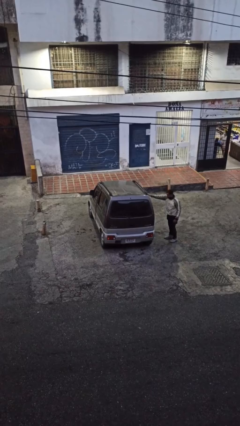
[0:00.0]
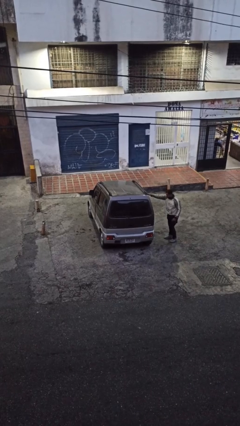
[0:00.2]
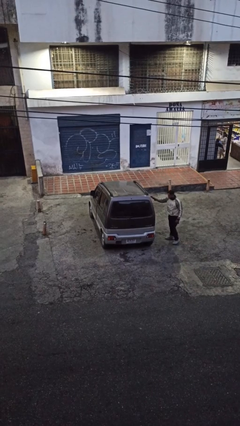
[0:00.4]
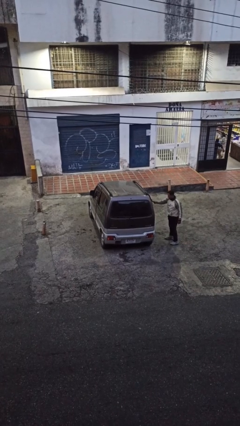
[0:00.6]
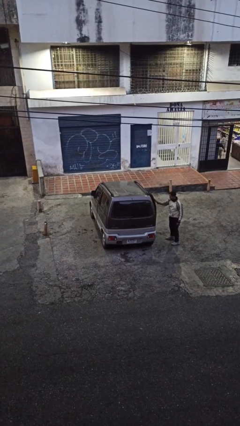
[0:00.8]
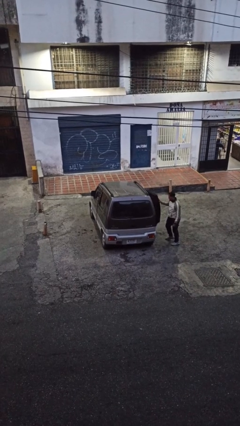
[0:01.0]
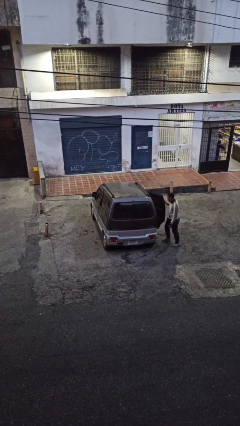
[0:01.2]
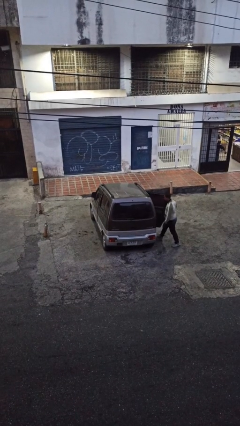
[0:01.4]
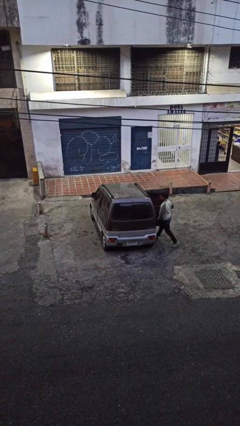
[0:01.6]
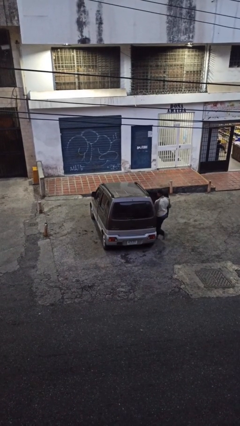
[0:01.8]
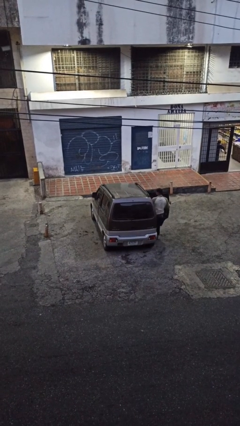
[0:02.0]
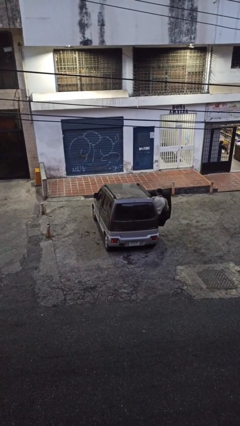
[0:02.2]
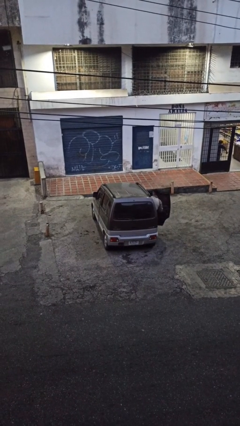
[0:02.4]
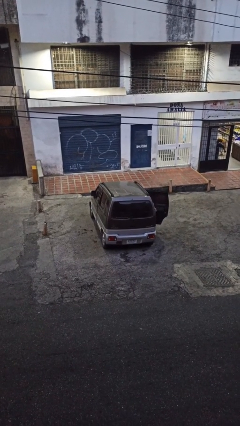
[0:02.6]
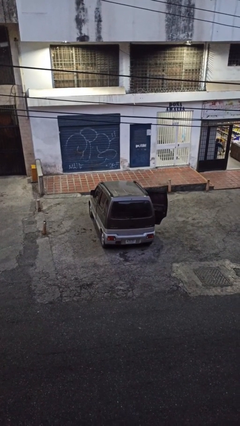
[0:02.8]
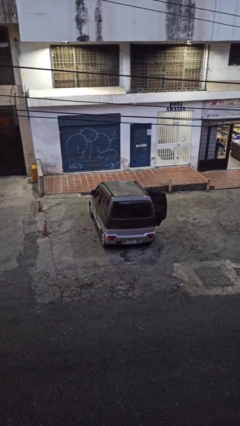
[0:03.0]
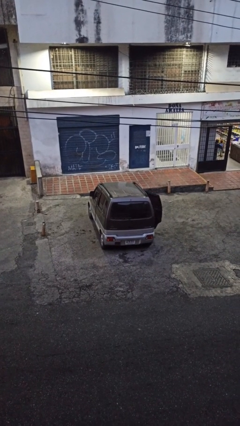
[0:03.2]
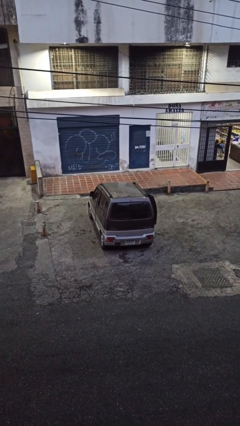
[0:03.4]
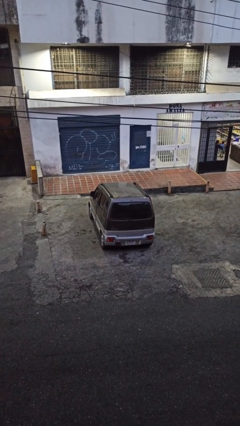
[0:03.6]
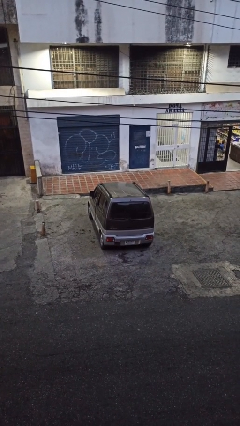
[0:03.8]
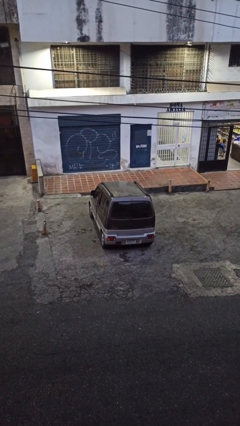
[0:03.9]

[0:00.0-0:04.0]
car picks up person

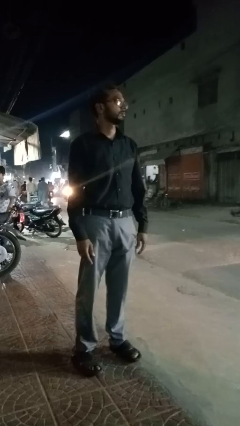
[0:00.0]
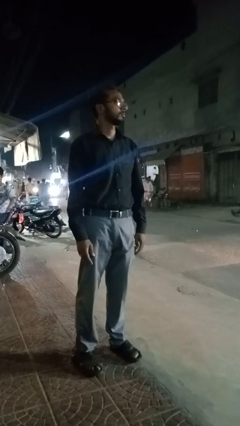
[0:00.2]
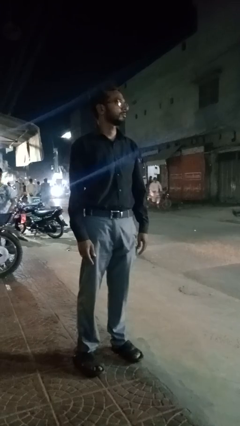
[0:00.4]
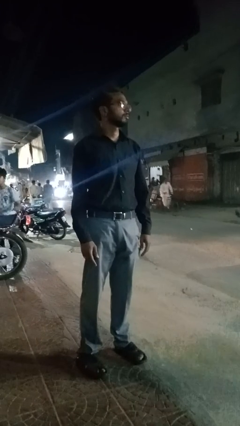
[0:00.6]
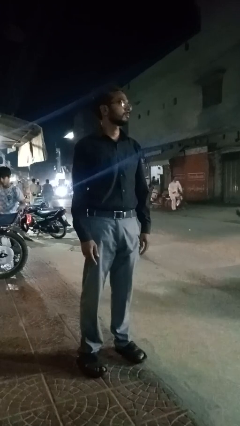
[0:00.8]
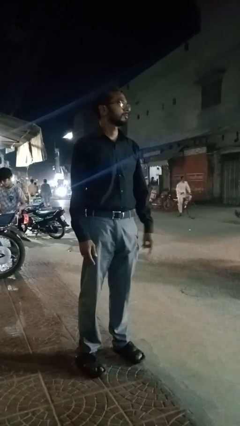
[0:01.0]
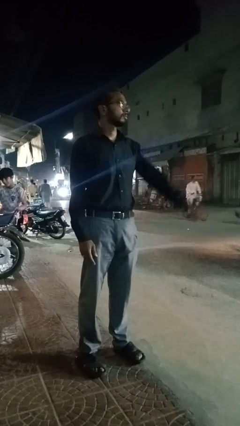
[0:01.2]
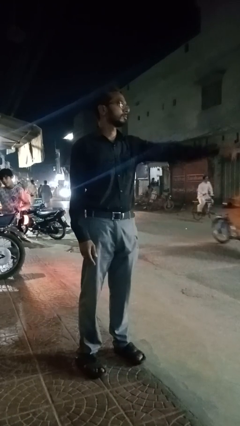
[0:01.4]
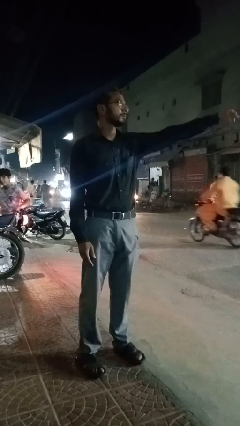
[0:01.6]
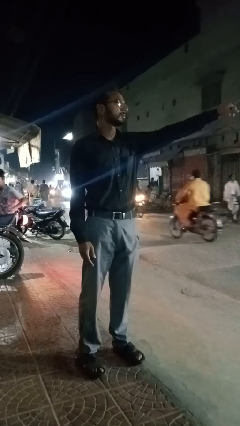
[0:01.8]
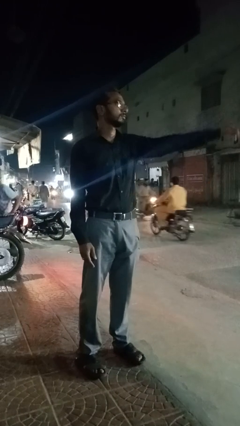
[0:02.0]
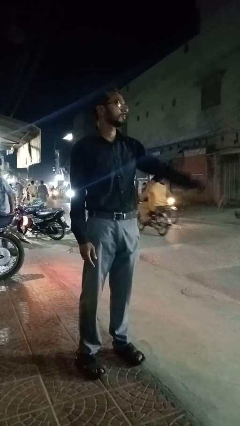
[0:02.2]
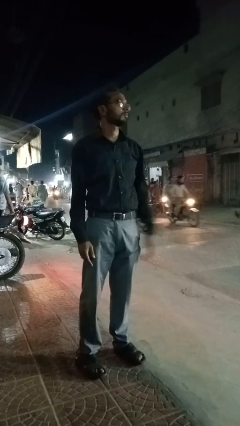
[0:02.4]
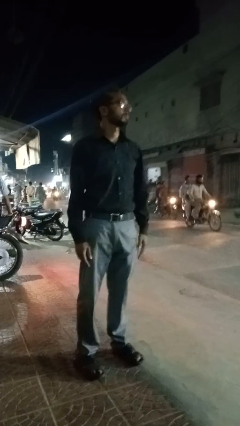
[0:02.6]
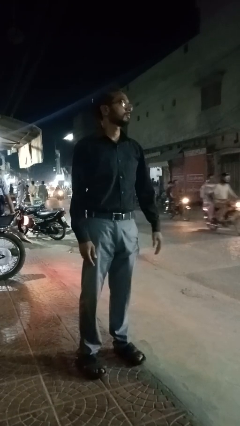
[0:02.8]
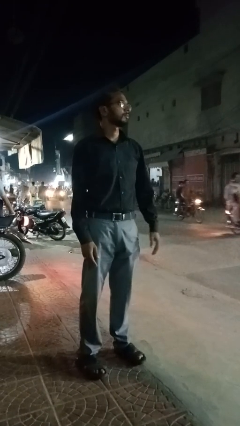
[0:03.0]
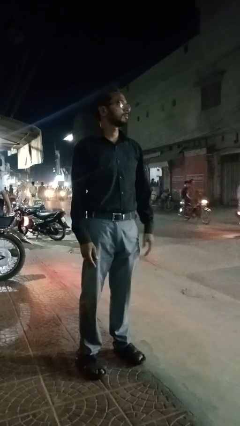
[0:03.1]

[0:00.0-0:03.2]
person points at person

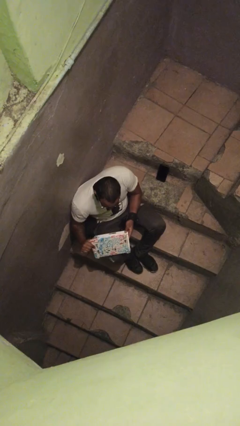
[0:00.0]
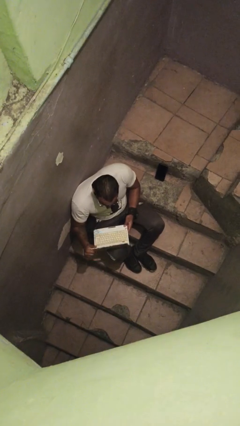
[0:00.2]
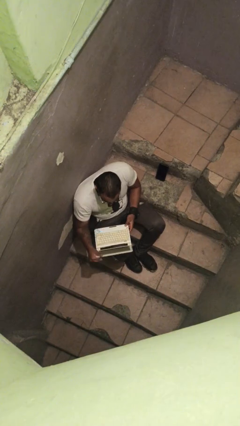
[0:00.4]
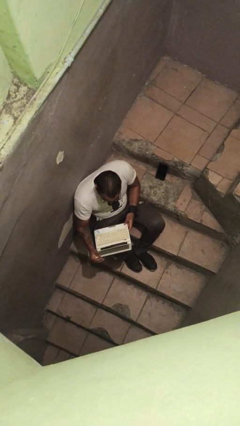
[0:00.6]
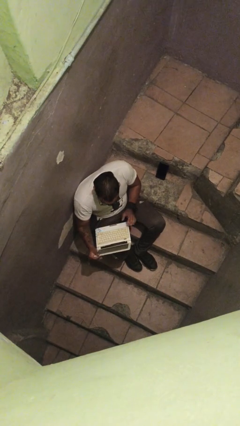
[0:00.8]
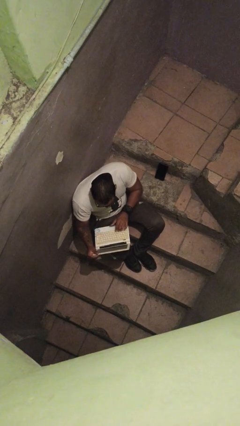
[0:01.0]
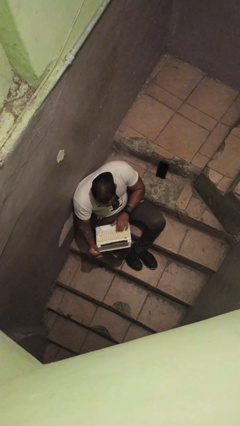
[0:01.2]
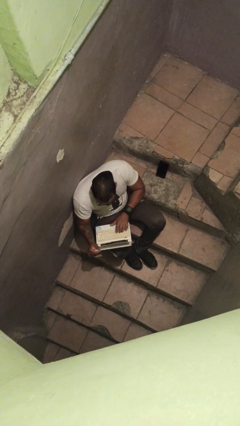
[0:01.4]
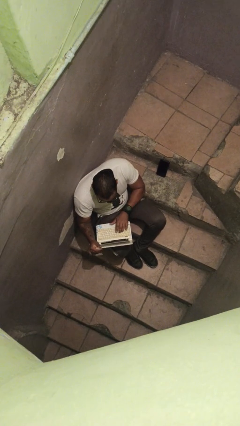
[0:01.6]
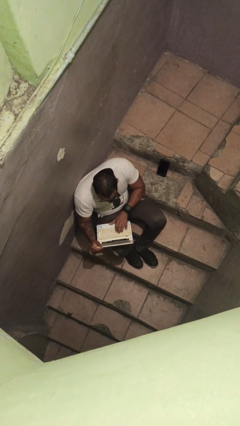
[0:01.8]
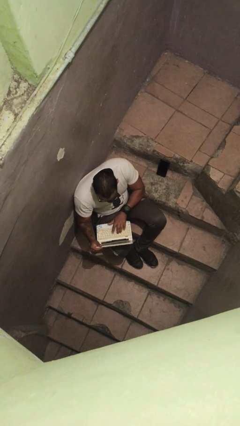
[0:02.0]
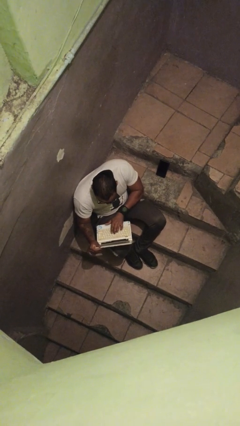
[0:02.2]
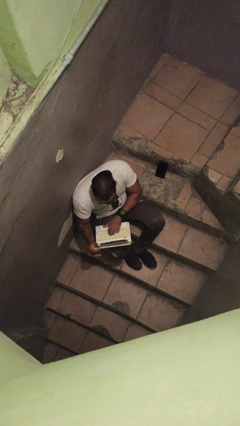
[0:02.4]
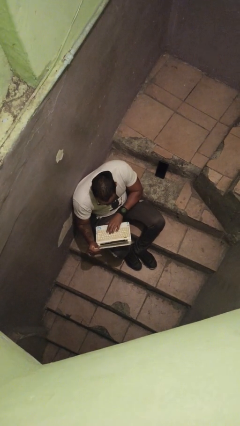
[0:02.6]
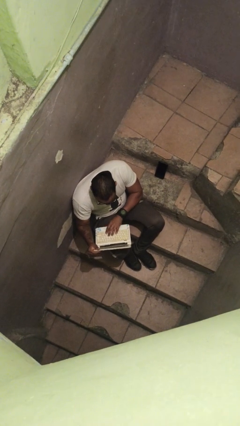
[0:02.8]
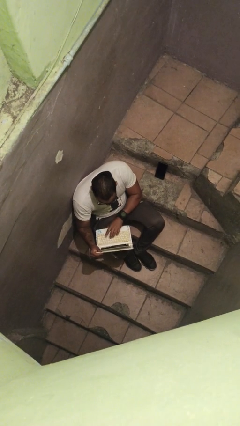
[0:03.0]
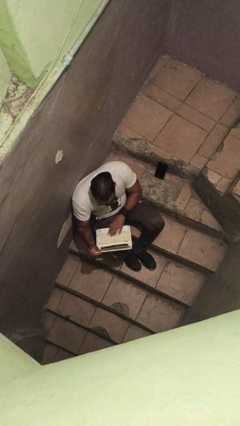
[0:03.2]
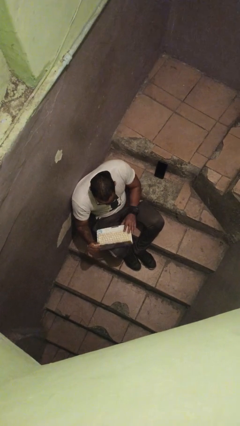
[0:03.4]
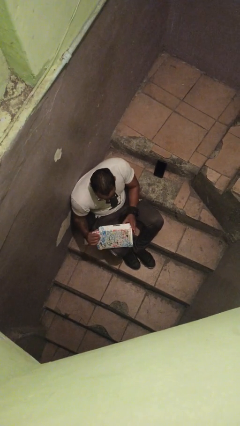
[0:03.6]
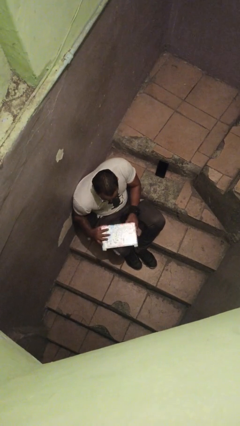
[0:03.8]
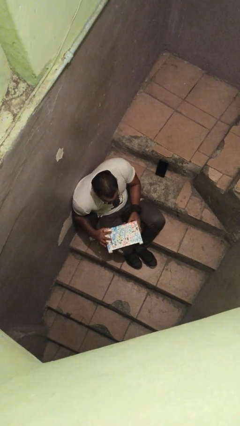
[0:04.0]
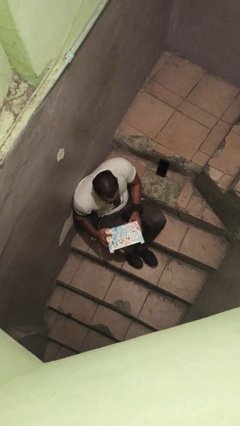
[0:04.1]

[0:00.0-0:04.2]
person interacts with laptop

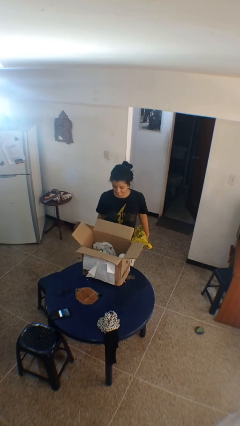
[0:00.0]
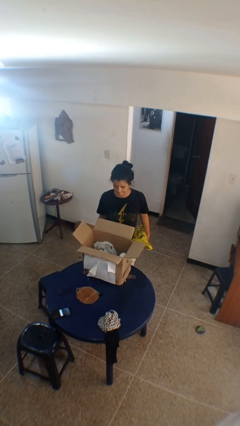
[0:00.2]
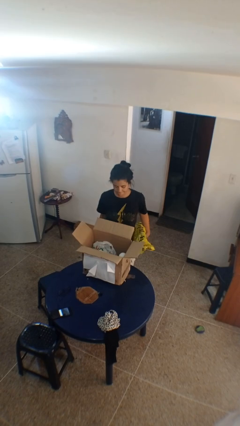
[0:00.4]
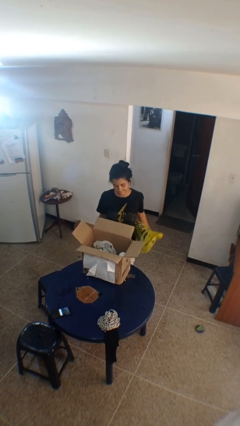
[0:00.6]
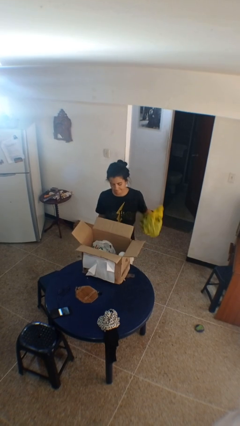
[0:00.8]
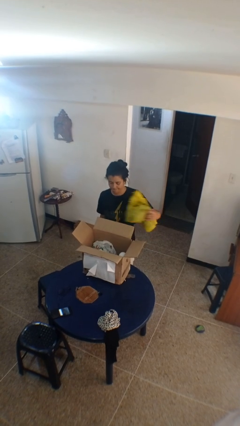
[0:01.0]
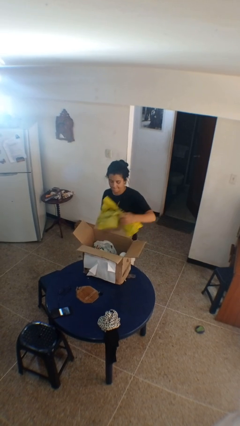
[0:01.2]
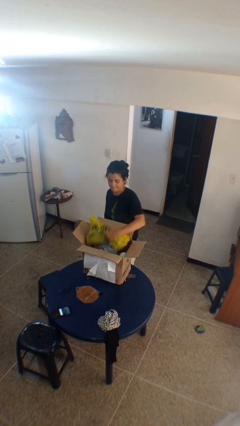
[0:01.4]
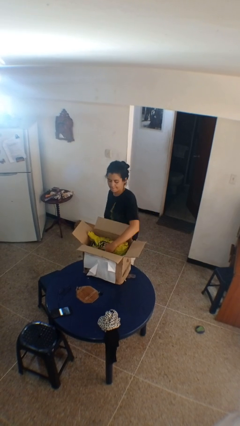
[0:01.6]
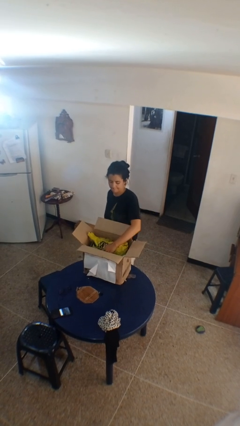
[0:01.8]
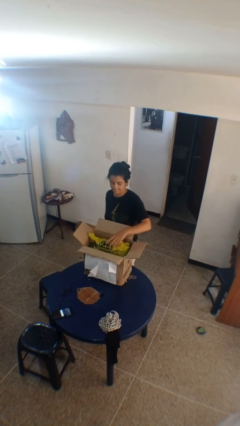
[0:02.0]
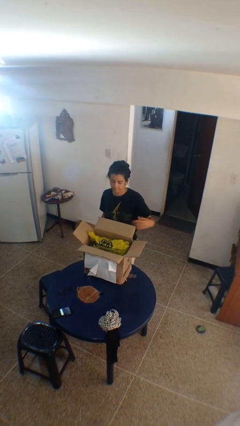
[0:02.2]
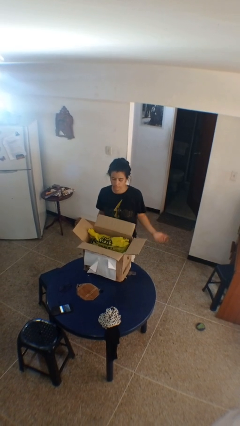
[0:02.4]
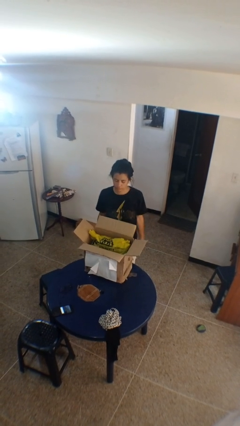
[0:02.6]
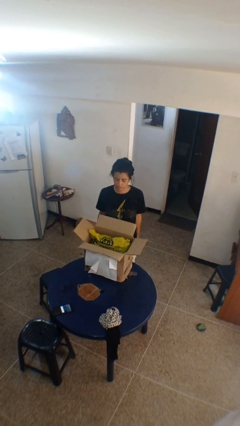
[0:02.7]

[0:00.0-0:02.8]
person puts object into box

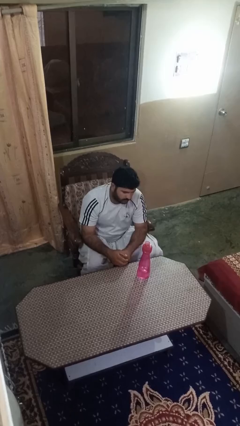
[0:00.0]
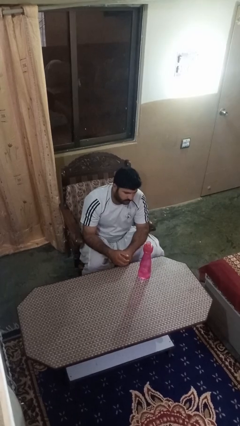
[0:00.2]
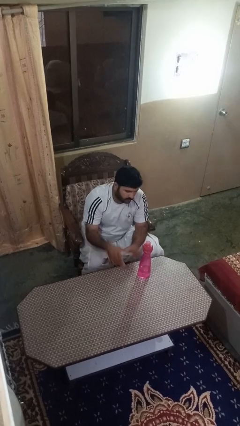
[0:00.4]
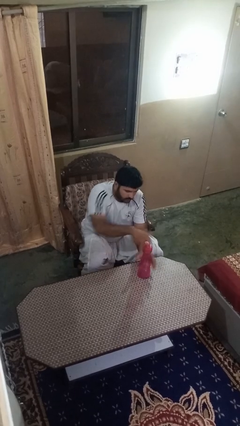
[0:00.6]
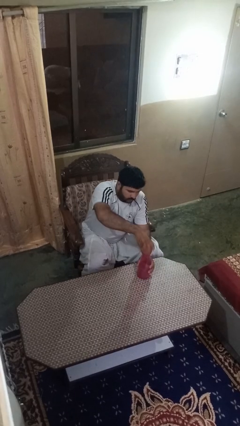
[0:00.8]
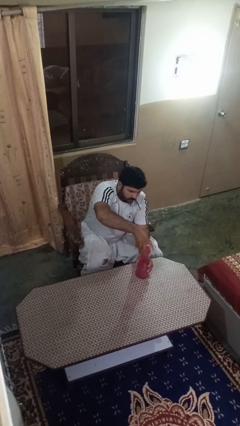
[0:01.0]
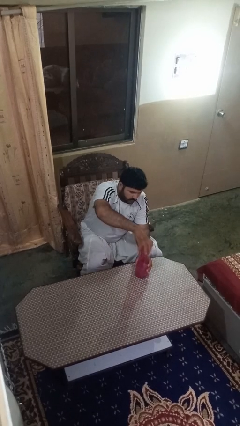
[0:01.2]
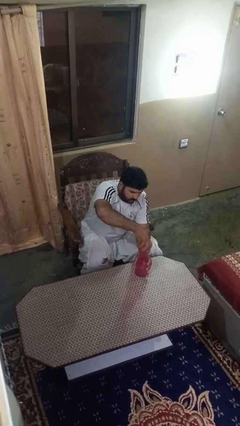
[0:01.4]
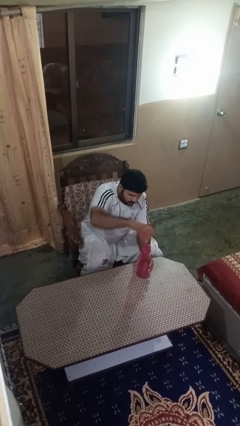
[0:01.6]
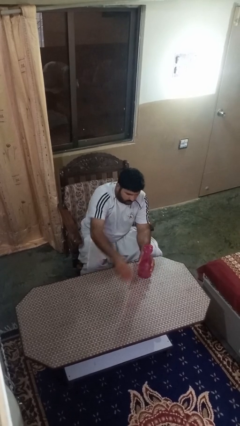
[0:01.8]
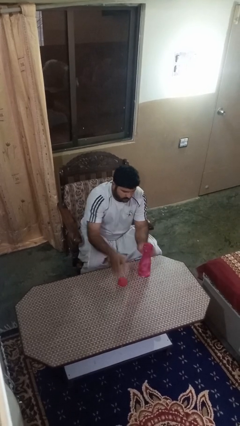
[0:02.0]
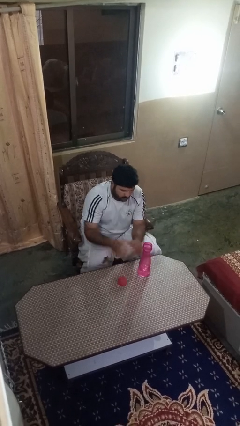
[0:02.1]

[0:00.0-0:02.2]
person unscrews lid from bottle

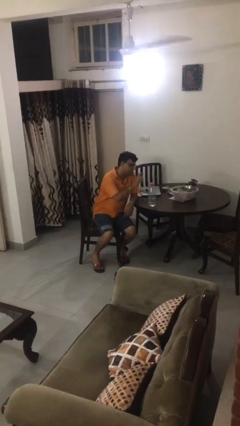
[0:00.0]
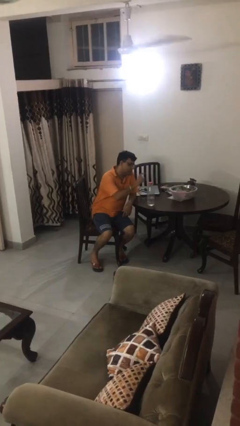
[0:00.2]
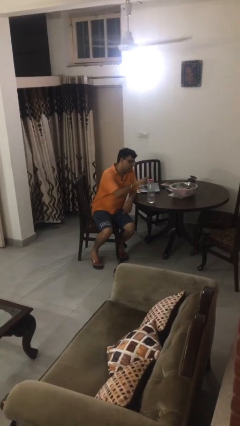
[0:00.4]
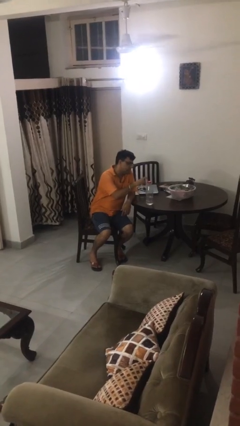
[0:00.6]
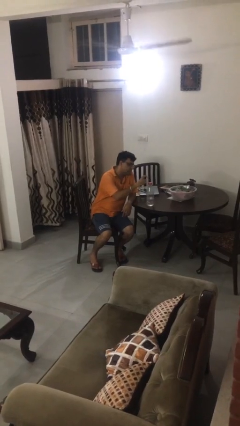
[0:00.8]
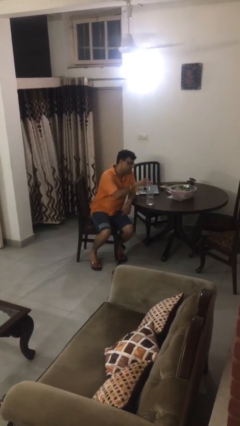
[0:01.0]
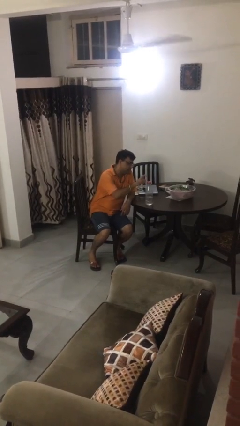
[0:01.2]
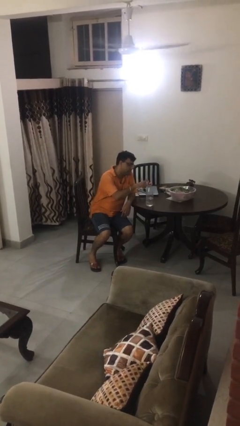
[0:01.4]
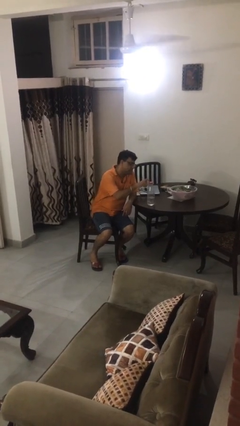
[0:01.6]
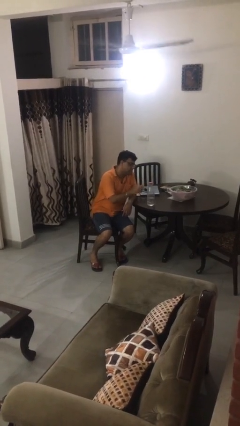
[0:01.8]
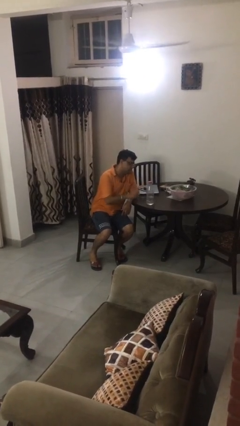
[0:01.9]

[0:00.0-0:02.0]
person taps object with finger
